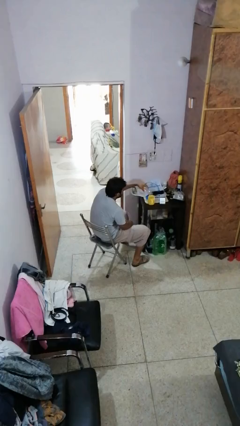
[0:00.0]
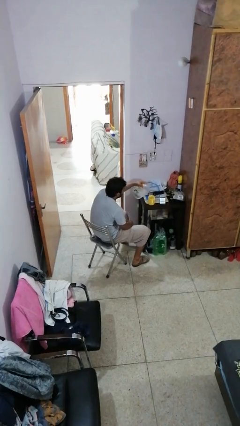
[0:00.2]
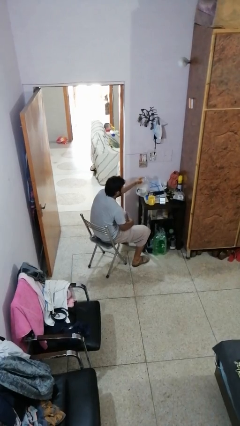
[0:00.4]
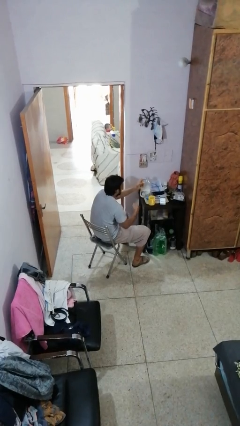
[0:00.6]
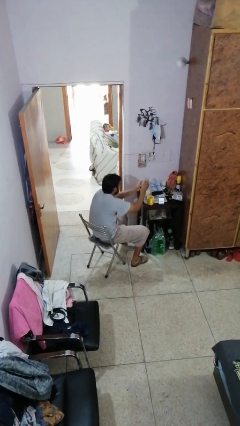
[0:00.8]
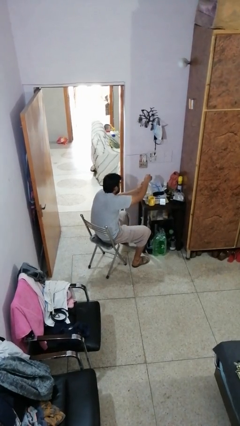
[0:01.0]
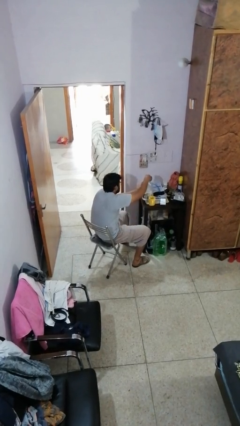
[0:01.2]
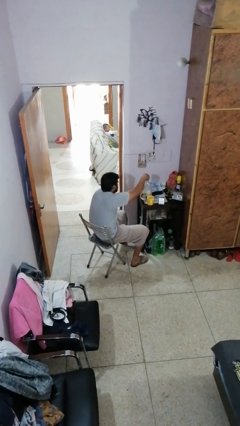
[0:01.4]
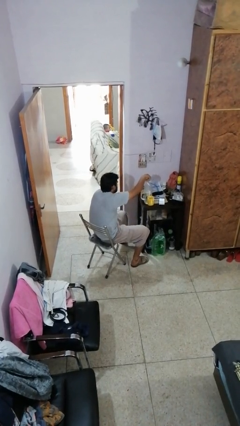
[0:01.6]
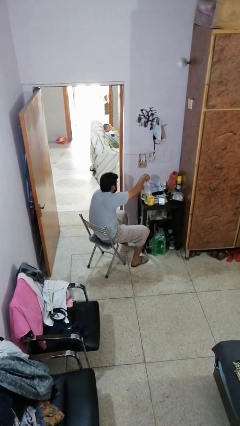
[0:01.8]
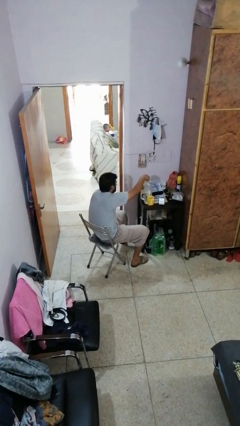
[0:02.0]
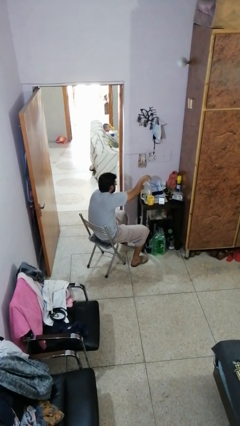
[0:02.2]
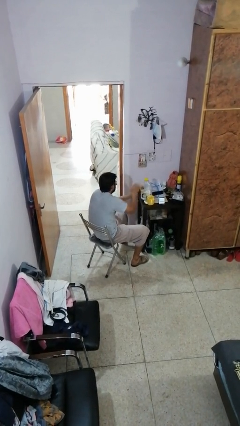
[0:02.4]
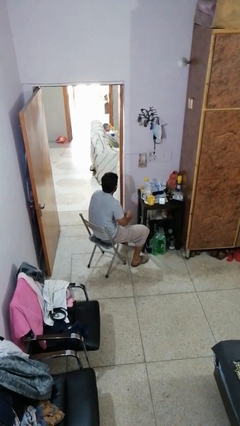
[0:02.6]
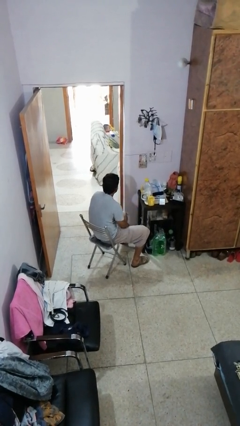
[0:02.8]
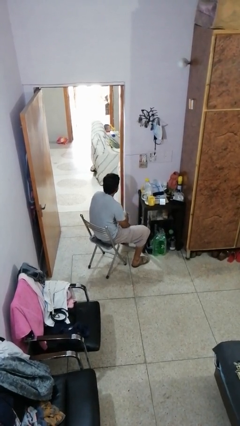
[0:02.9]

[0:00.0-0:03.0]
person screws lid to bottle

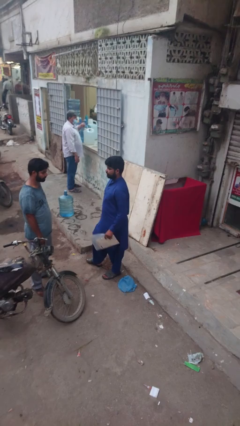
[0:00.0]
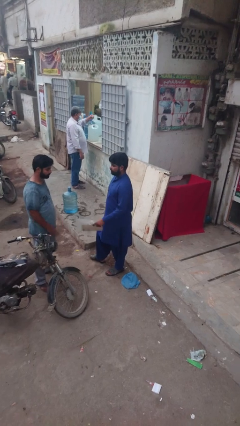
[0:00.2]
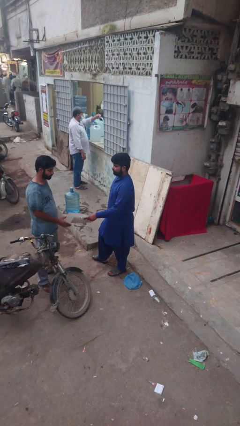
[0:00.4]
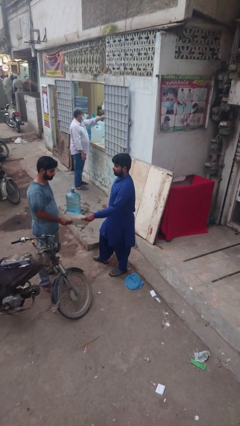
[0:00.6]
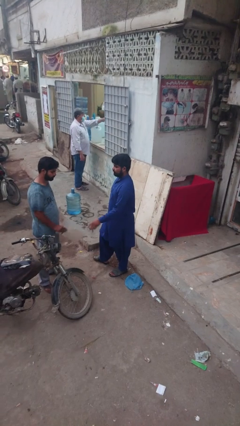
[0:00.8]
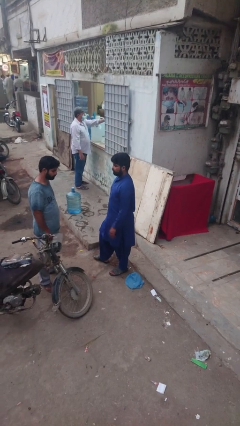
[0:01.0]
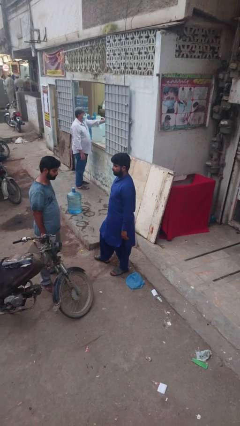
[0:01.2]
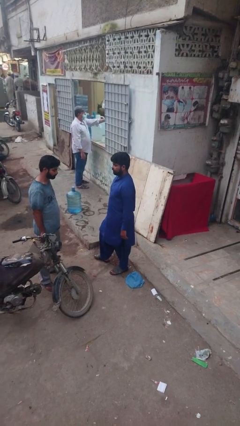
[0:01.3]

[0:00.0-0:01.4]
person transfers object to person

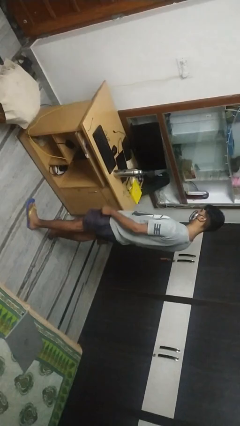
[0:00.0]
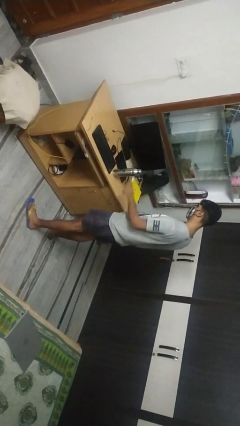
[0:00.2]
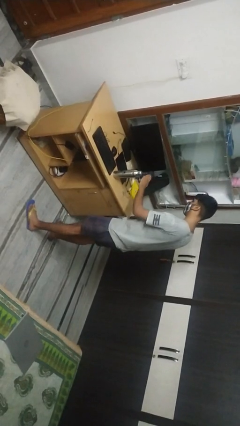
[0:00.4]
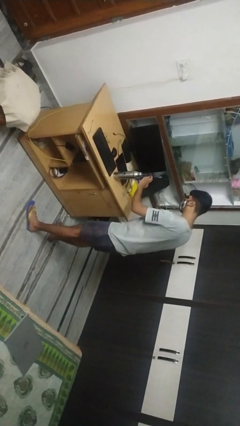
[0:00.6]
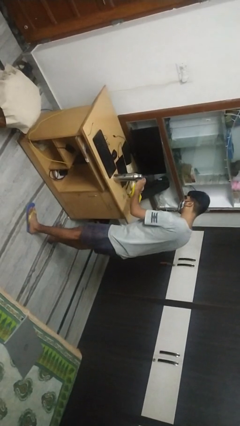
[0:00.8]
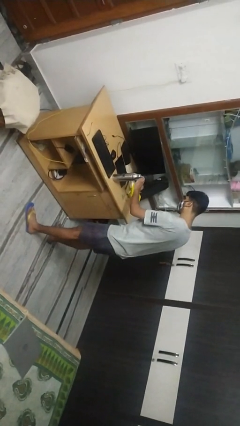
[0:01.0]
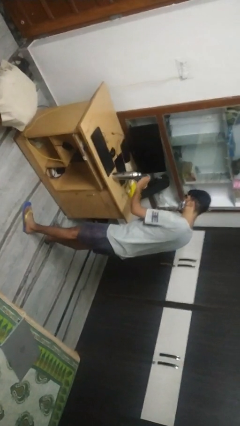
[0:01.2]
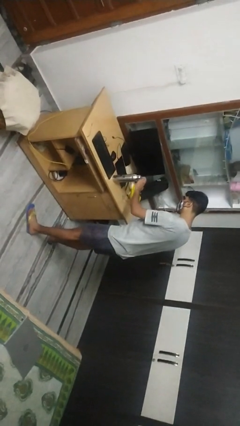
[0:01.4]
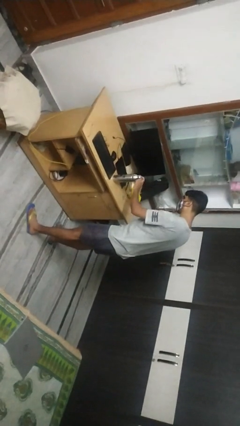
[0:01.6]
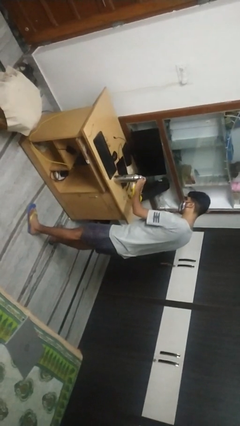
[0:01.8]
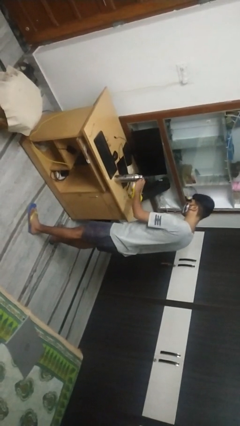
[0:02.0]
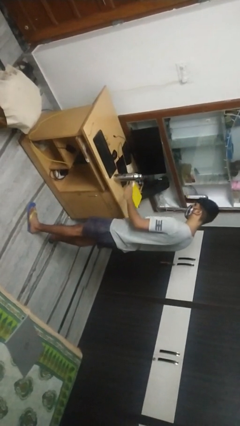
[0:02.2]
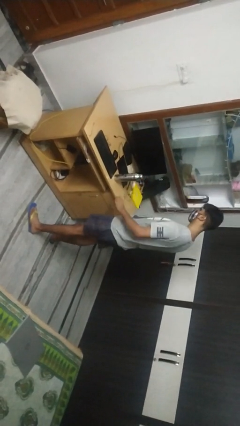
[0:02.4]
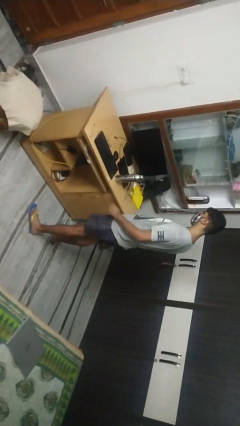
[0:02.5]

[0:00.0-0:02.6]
person taps object with finger

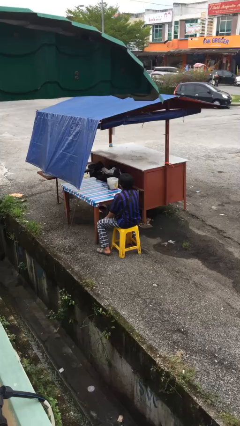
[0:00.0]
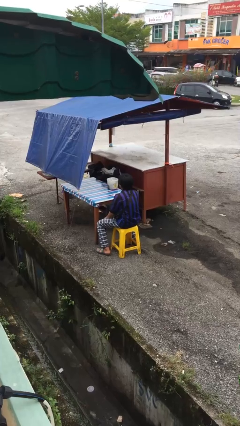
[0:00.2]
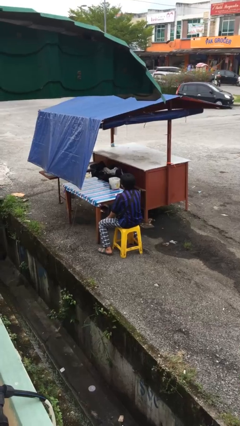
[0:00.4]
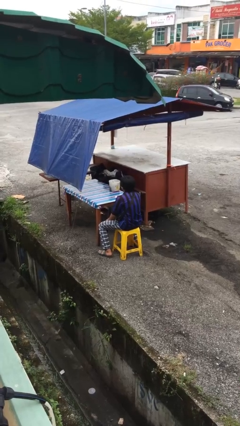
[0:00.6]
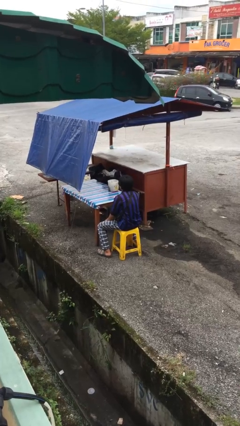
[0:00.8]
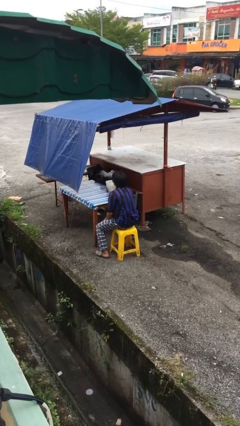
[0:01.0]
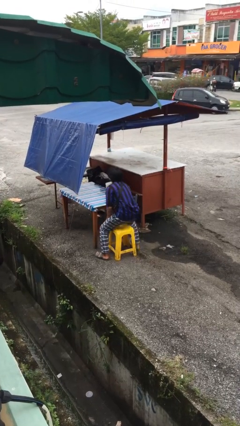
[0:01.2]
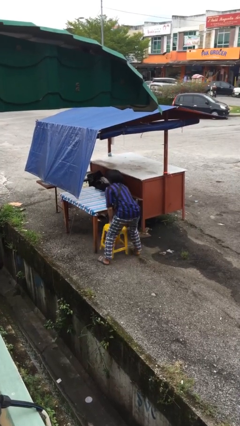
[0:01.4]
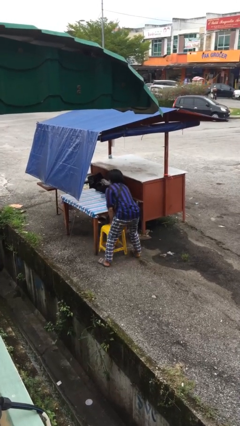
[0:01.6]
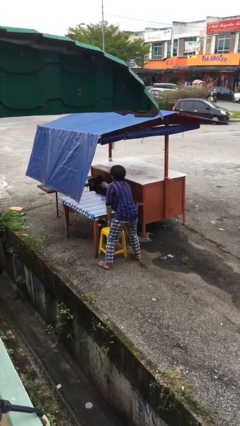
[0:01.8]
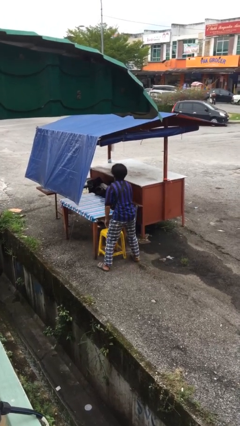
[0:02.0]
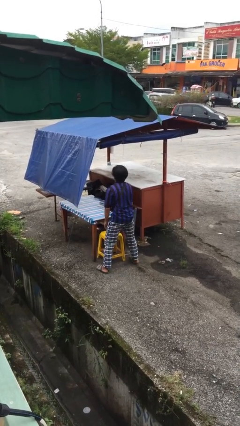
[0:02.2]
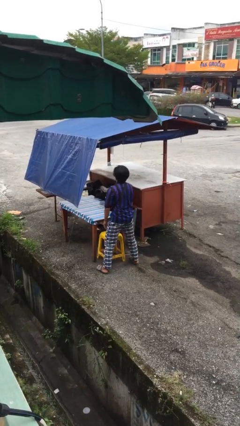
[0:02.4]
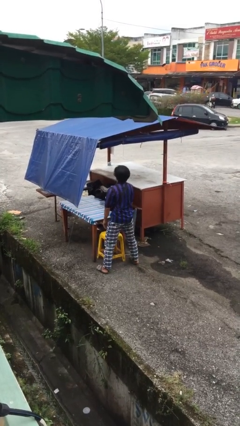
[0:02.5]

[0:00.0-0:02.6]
person stands up

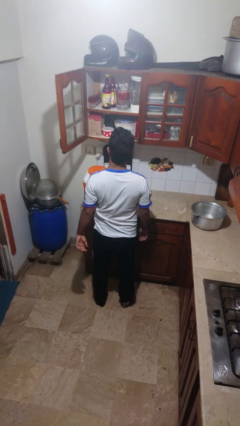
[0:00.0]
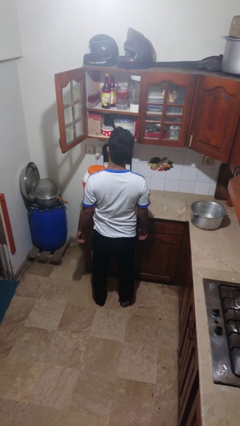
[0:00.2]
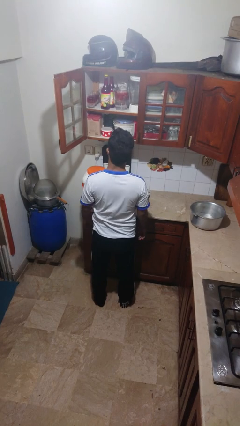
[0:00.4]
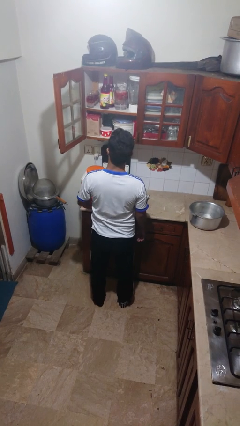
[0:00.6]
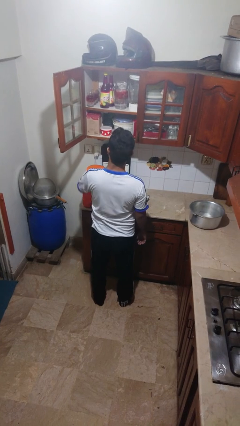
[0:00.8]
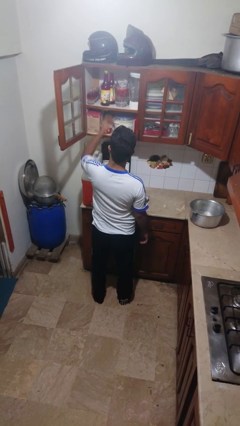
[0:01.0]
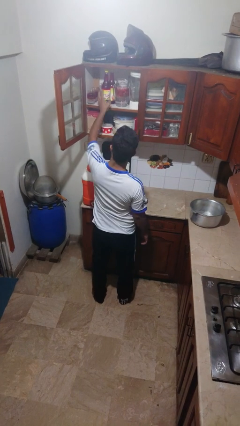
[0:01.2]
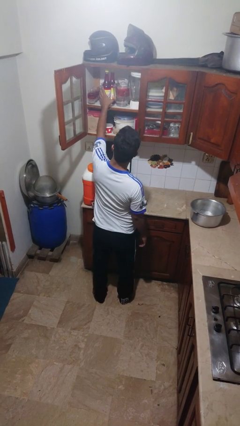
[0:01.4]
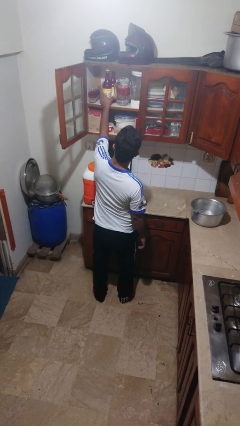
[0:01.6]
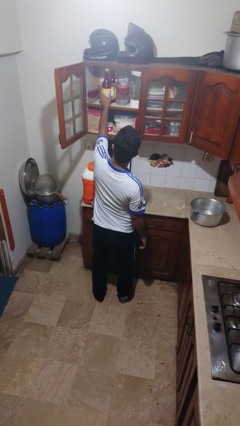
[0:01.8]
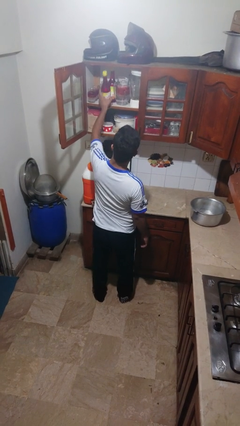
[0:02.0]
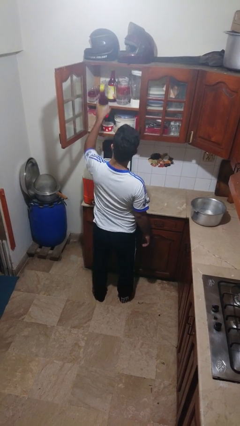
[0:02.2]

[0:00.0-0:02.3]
person picks up object from cabinet

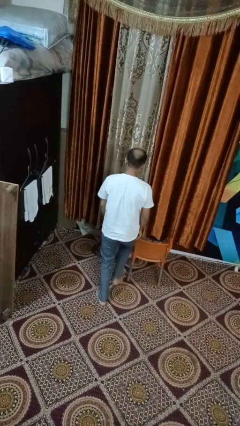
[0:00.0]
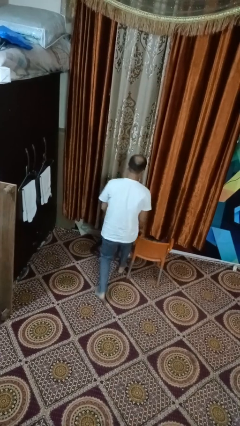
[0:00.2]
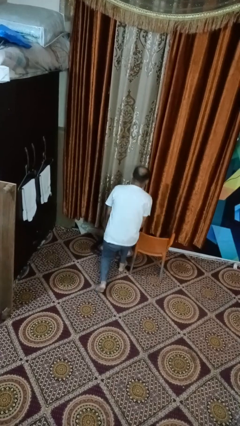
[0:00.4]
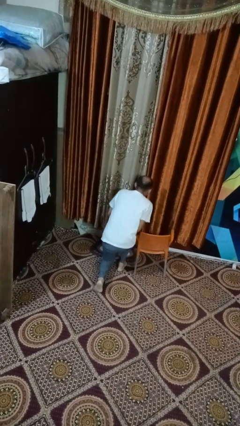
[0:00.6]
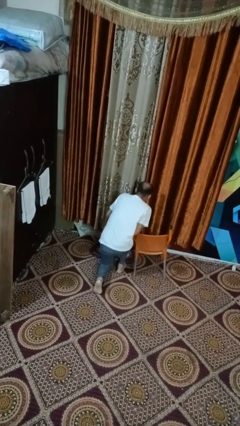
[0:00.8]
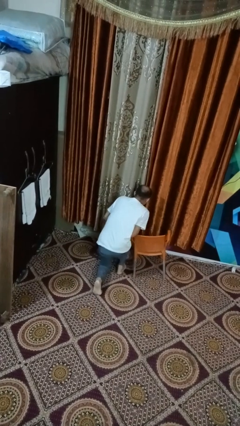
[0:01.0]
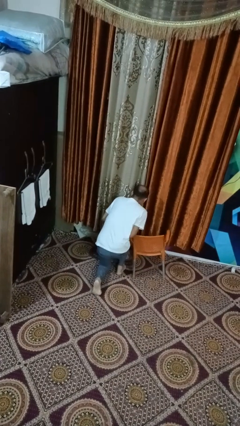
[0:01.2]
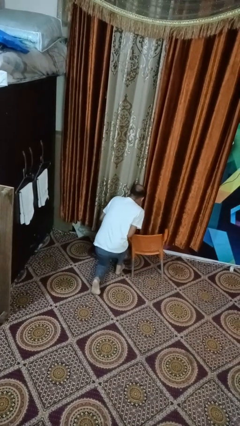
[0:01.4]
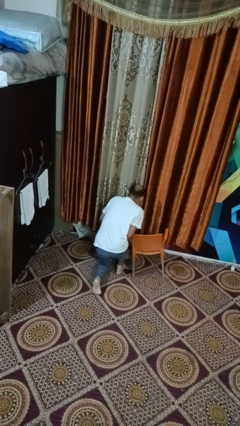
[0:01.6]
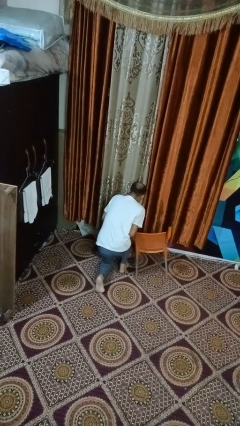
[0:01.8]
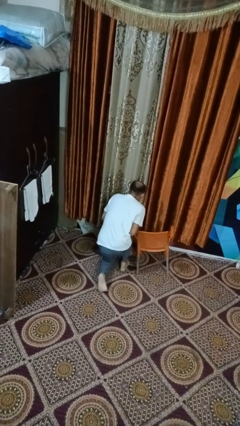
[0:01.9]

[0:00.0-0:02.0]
person trips on object on floor

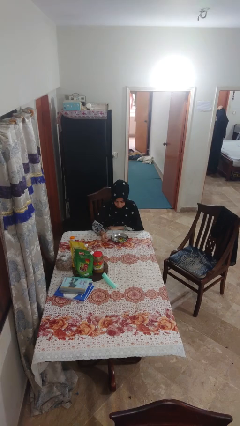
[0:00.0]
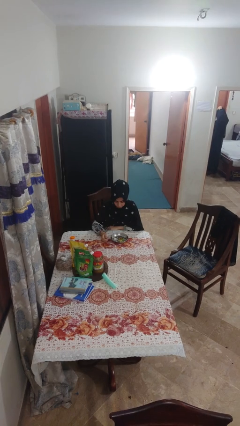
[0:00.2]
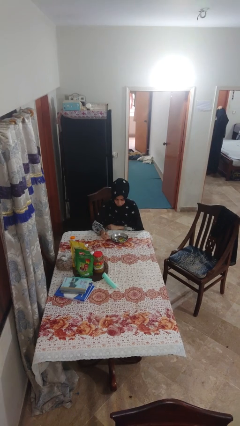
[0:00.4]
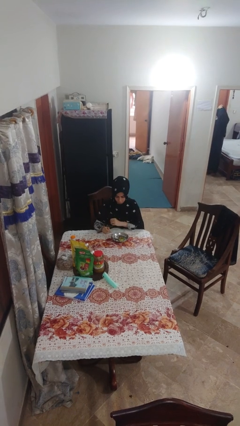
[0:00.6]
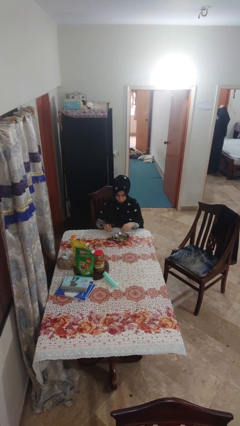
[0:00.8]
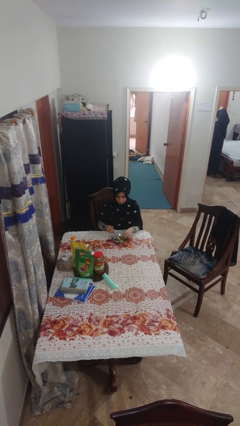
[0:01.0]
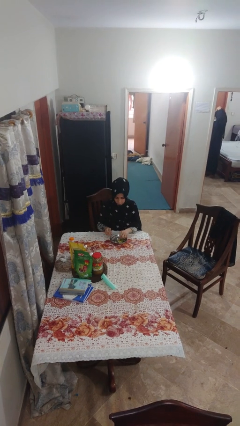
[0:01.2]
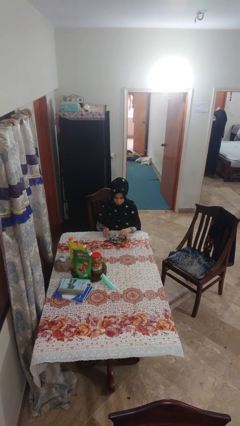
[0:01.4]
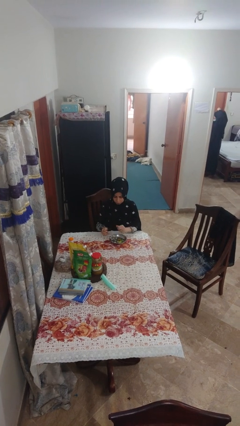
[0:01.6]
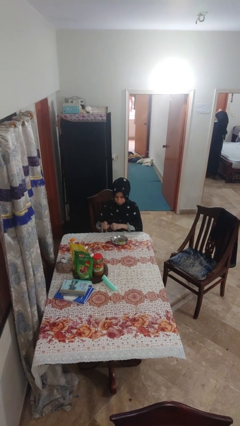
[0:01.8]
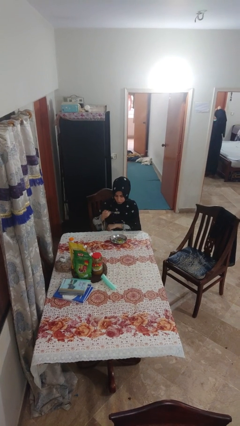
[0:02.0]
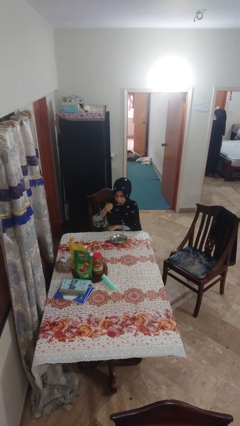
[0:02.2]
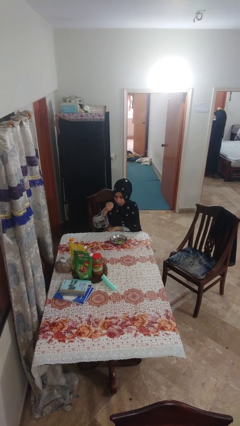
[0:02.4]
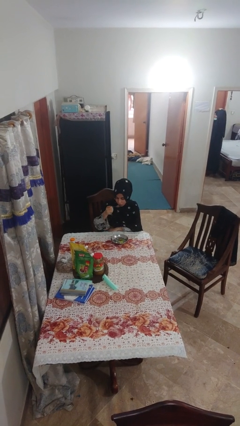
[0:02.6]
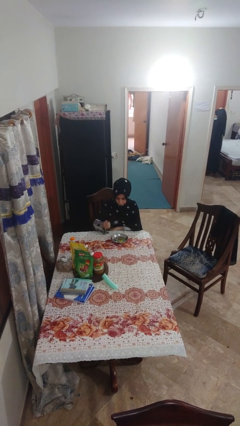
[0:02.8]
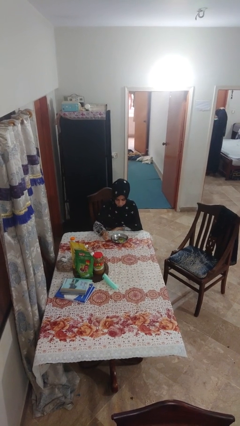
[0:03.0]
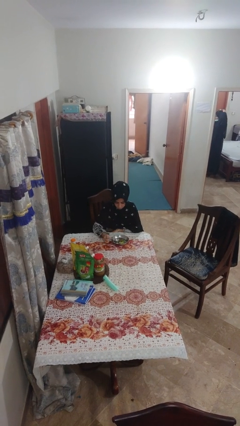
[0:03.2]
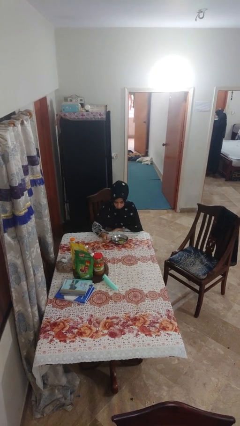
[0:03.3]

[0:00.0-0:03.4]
person eats with utensil
